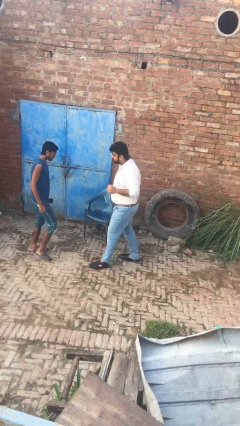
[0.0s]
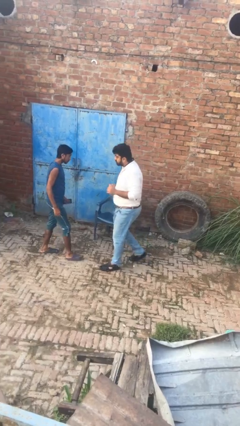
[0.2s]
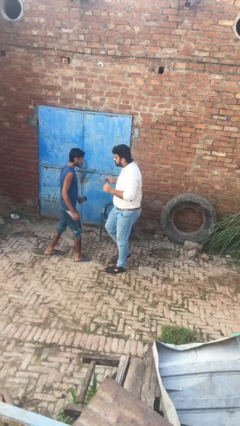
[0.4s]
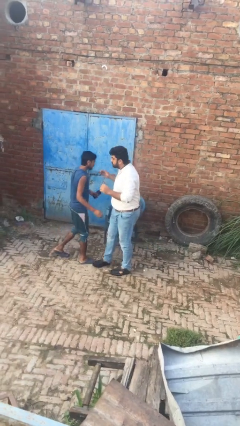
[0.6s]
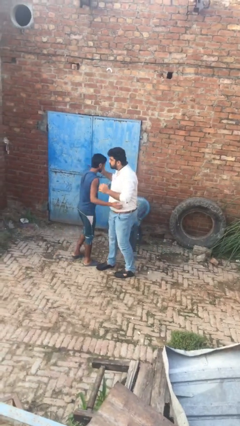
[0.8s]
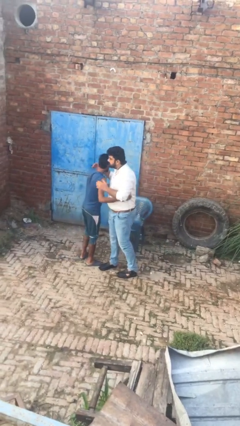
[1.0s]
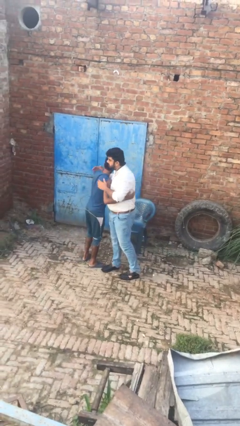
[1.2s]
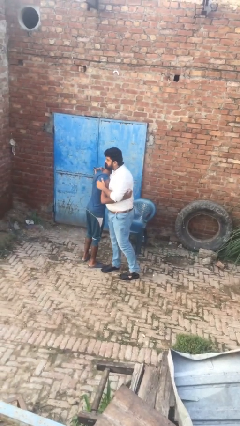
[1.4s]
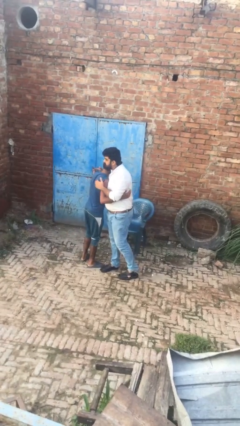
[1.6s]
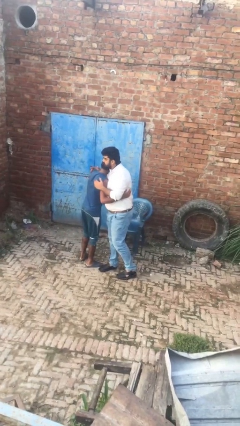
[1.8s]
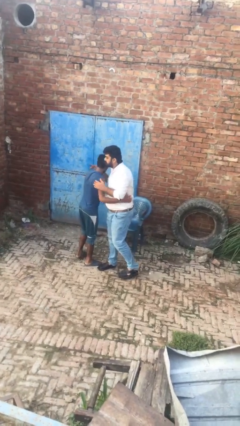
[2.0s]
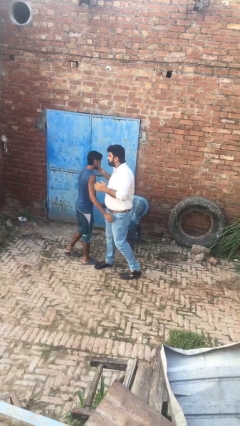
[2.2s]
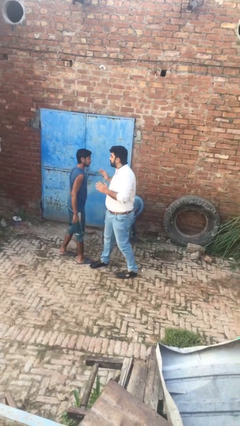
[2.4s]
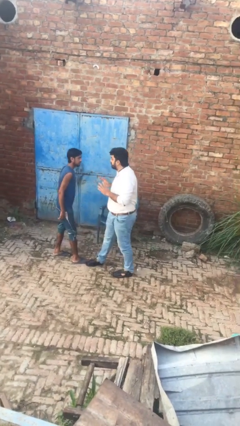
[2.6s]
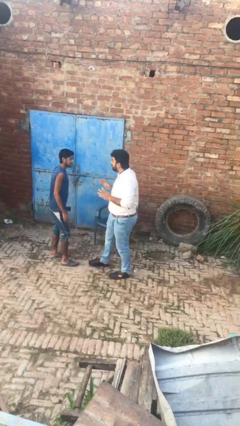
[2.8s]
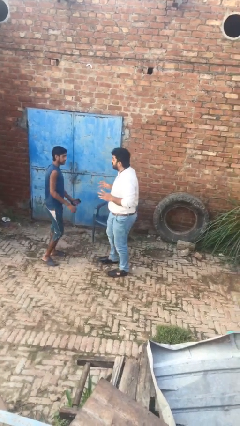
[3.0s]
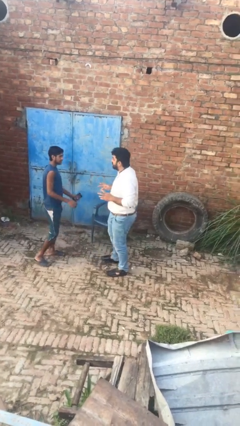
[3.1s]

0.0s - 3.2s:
person embraces person

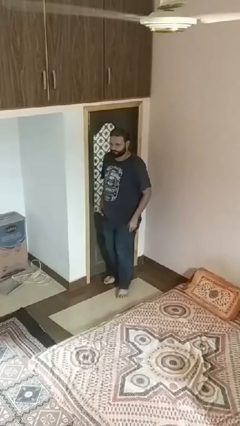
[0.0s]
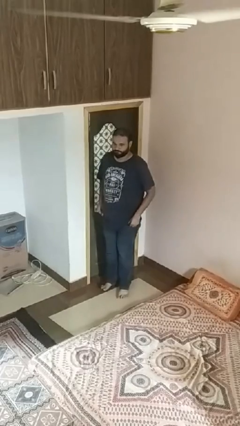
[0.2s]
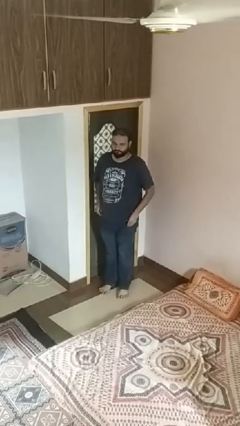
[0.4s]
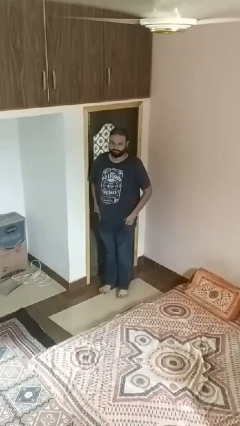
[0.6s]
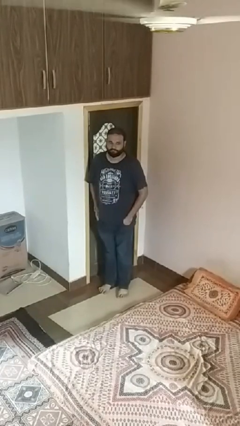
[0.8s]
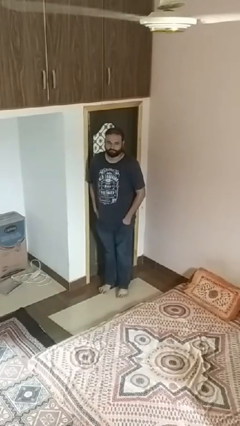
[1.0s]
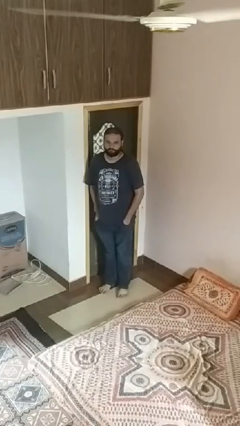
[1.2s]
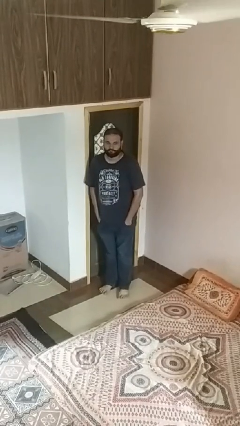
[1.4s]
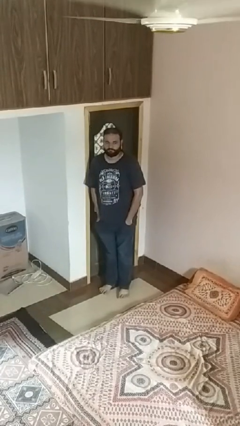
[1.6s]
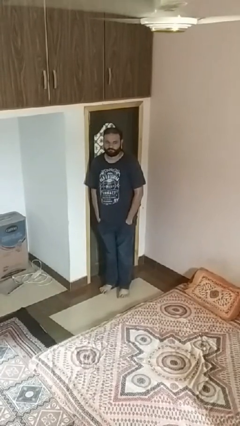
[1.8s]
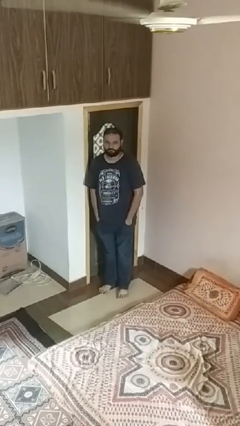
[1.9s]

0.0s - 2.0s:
person puts hands in back pockets

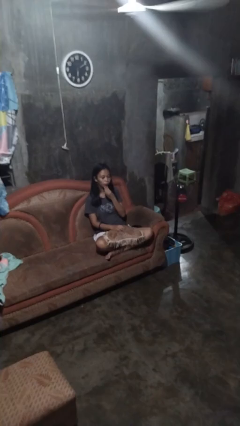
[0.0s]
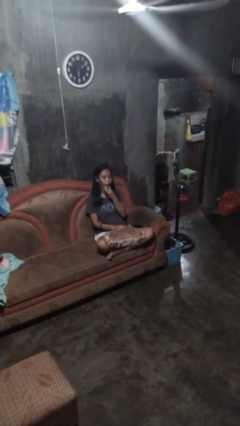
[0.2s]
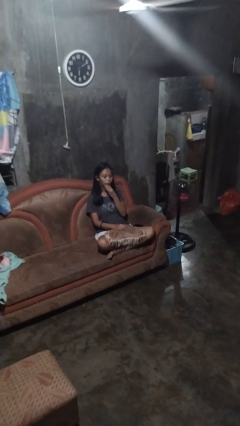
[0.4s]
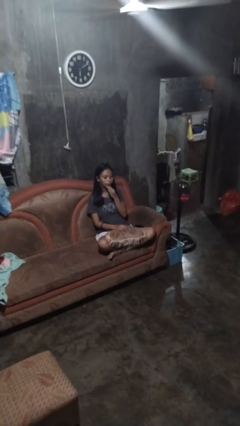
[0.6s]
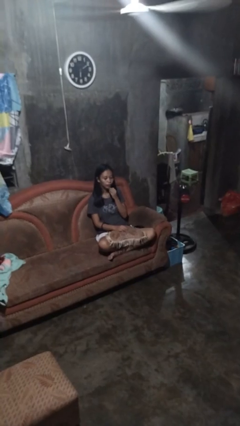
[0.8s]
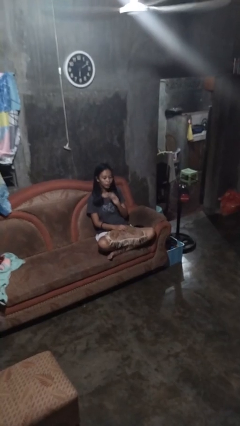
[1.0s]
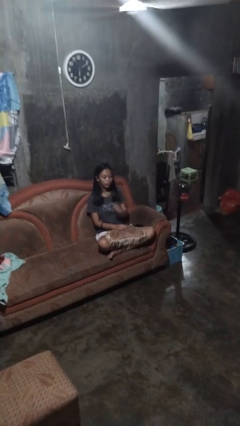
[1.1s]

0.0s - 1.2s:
person strokes chin

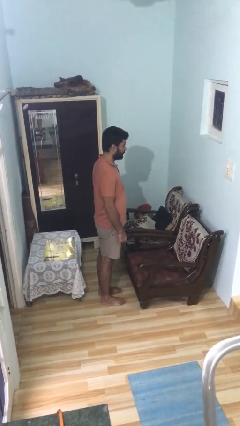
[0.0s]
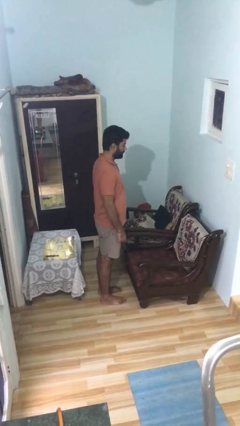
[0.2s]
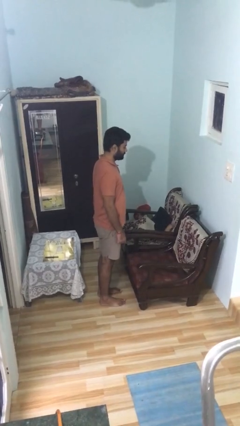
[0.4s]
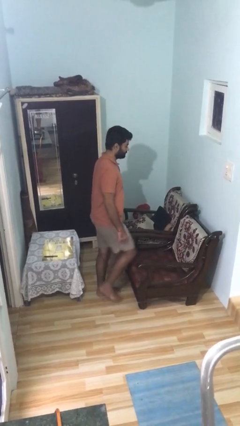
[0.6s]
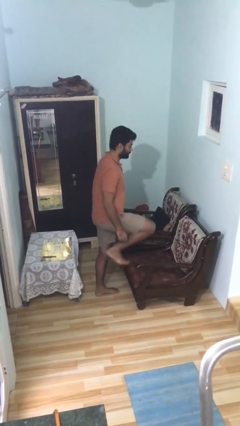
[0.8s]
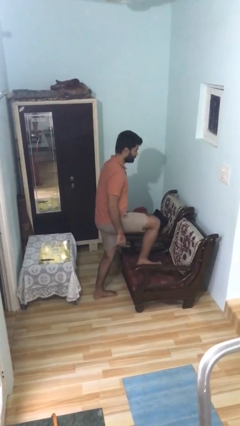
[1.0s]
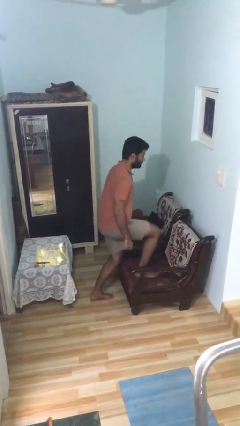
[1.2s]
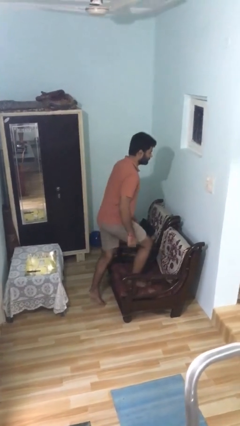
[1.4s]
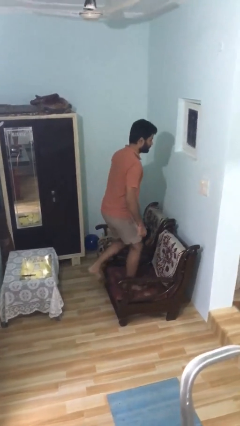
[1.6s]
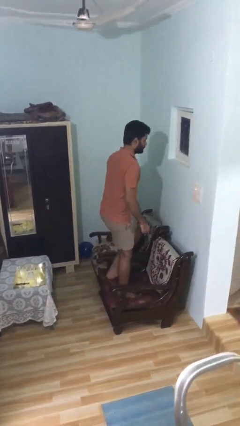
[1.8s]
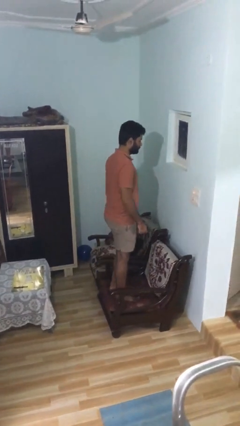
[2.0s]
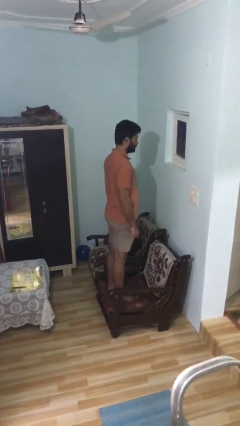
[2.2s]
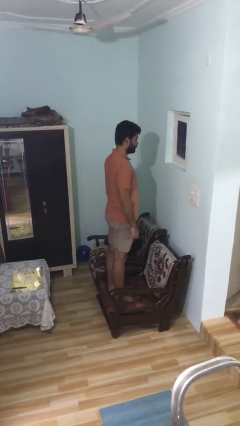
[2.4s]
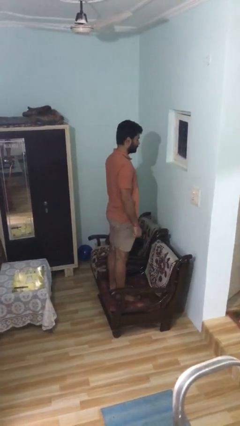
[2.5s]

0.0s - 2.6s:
person climbs on couch

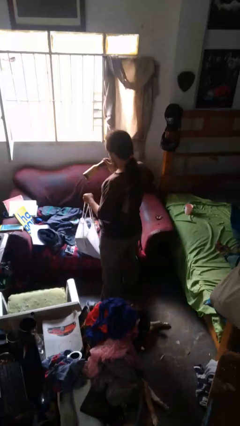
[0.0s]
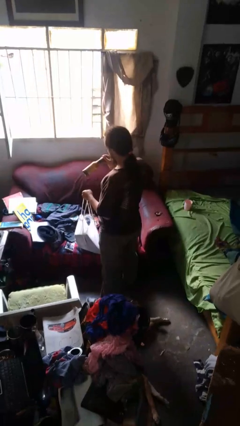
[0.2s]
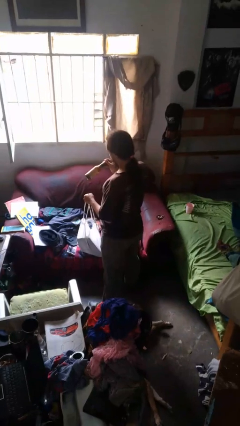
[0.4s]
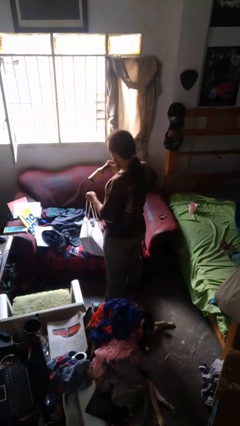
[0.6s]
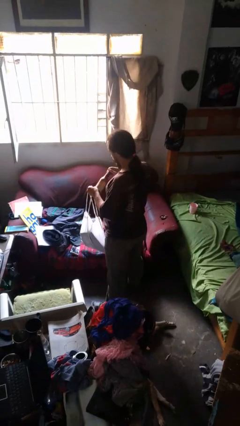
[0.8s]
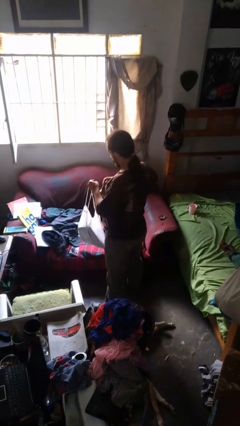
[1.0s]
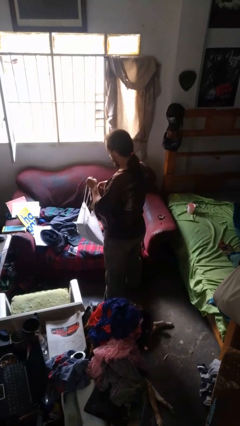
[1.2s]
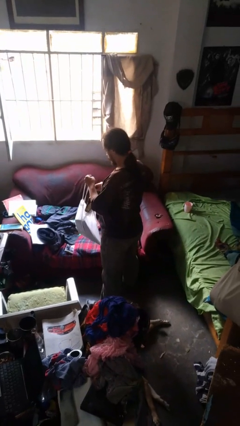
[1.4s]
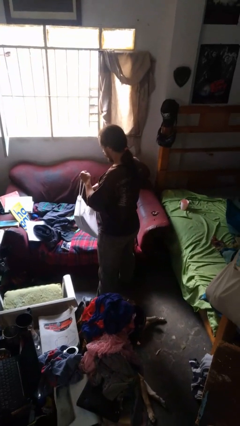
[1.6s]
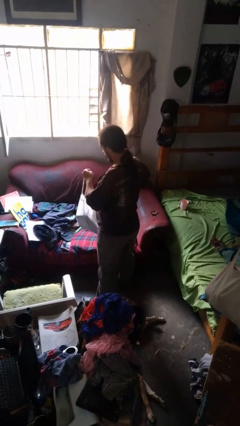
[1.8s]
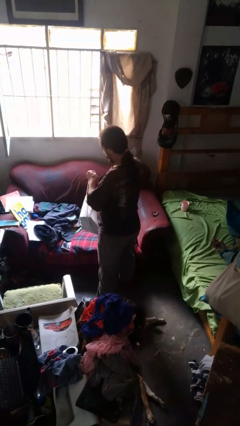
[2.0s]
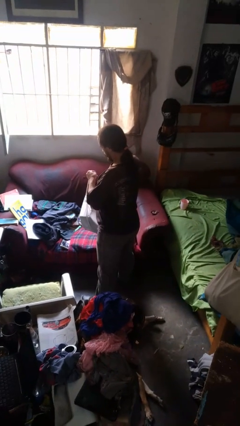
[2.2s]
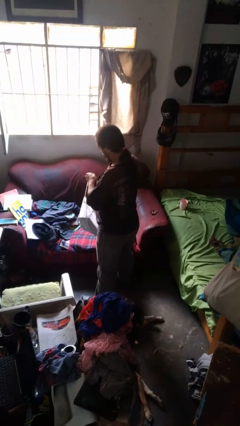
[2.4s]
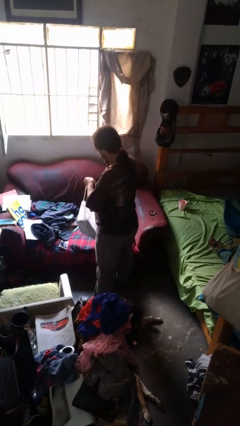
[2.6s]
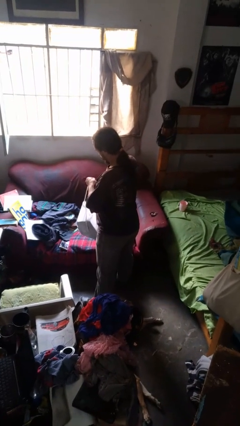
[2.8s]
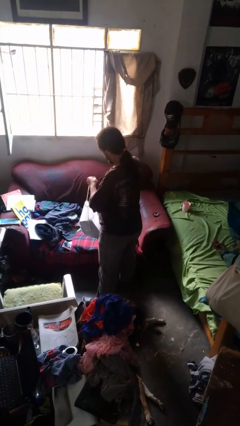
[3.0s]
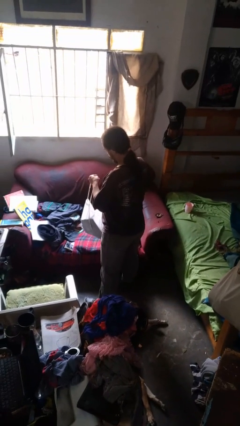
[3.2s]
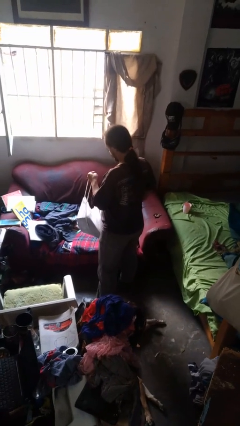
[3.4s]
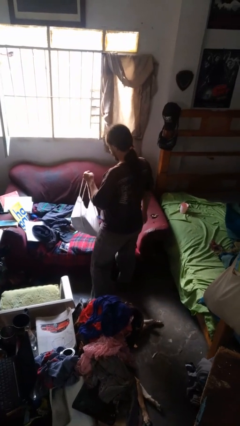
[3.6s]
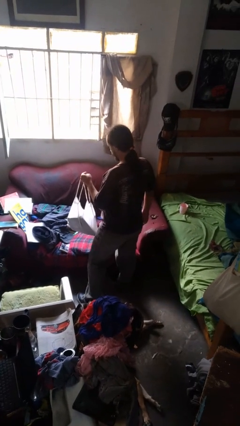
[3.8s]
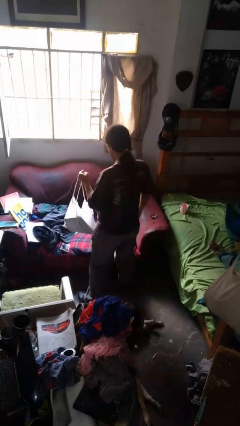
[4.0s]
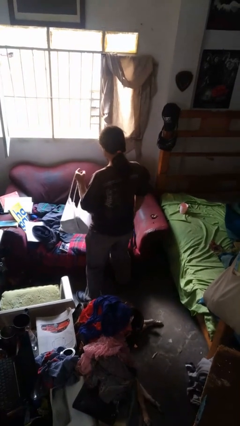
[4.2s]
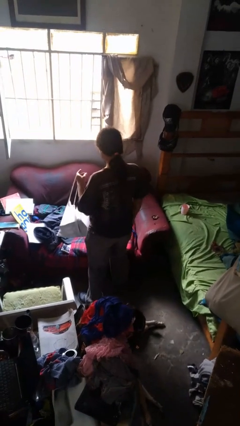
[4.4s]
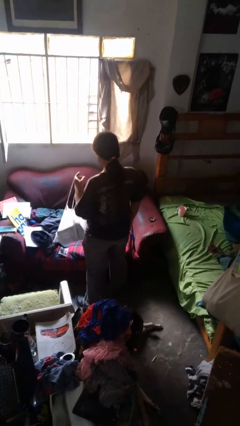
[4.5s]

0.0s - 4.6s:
person puts object into bag

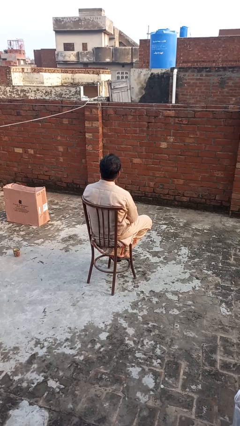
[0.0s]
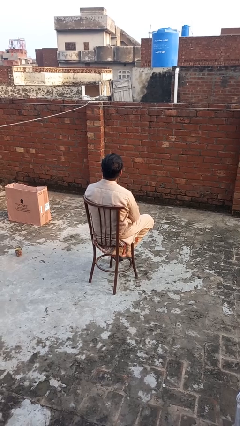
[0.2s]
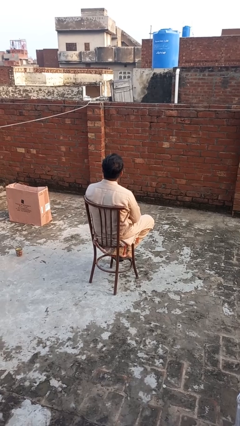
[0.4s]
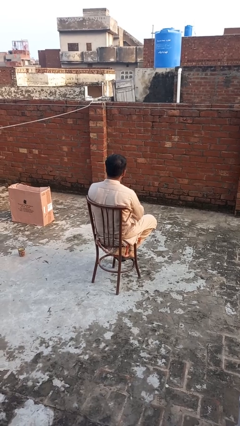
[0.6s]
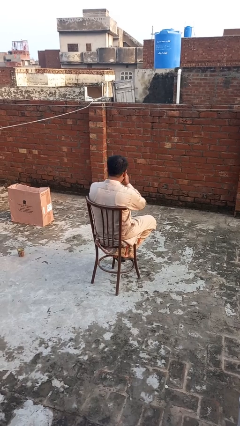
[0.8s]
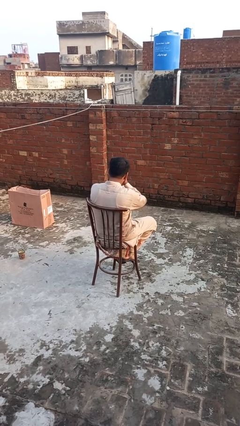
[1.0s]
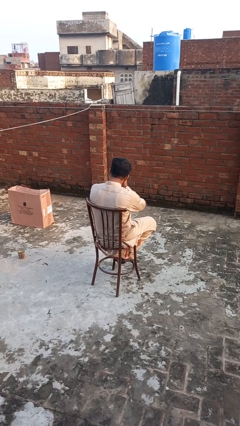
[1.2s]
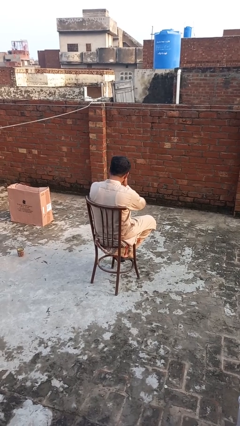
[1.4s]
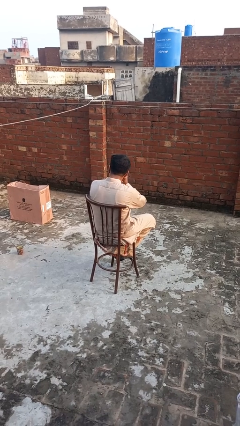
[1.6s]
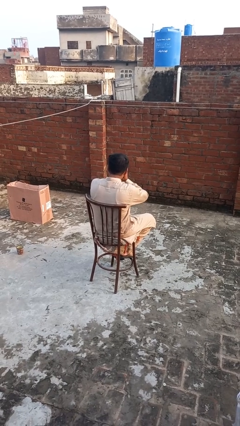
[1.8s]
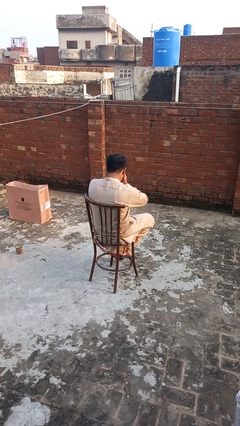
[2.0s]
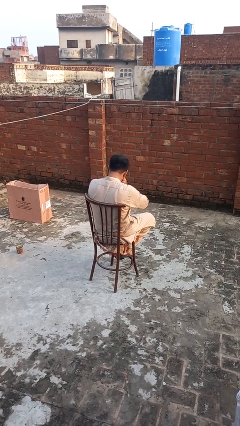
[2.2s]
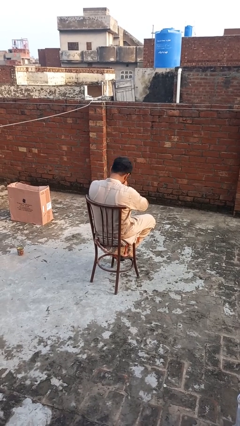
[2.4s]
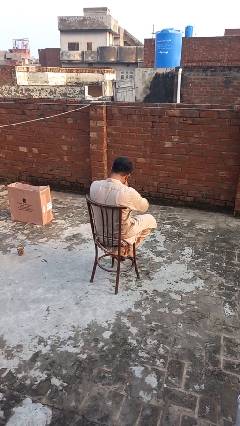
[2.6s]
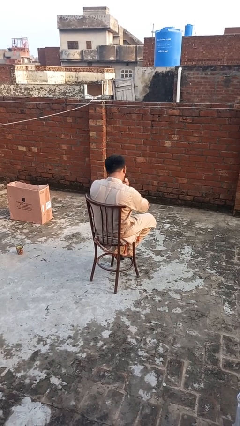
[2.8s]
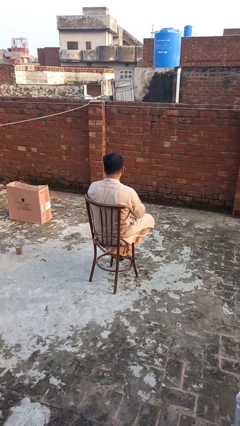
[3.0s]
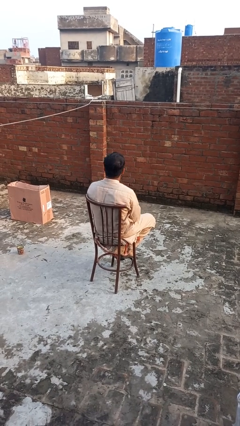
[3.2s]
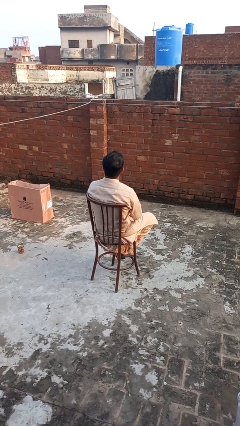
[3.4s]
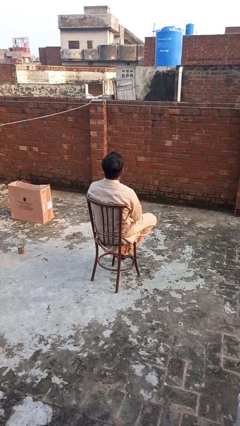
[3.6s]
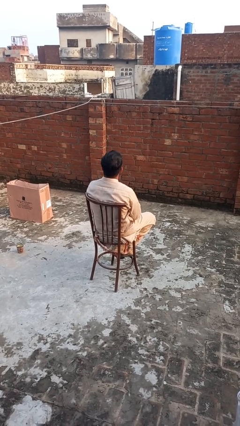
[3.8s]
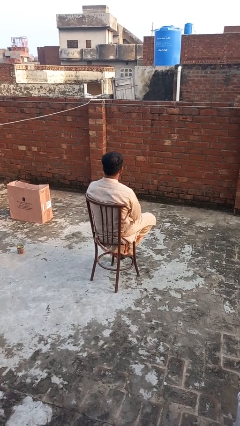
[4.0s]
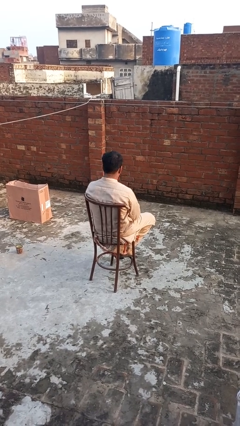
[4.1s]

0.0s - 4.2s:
person blows nose
